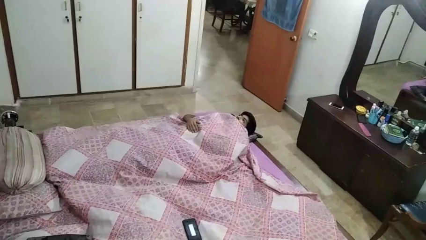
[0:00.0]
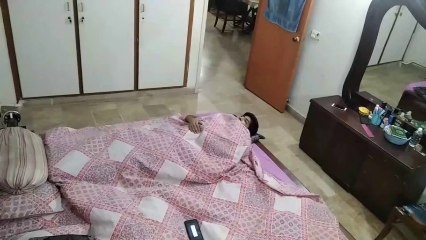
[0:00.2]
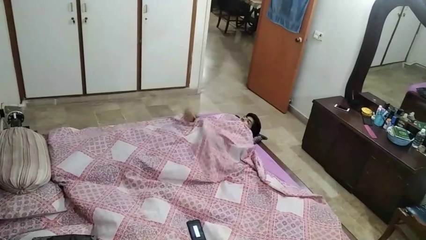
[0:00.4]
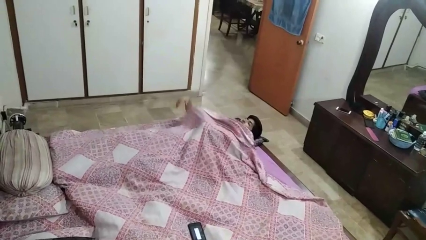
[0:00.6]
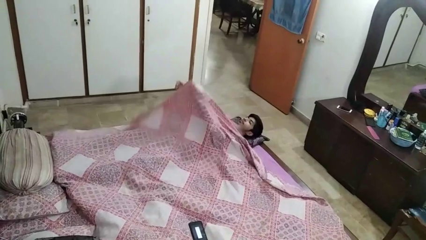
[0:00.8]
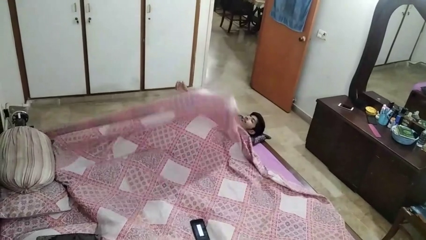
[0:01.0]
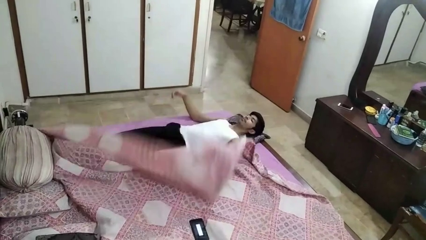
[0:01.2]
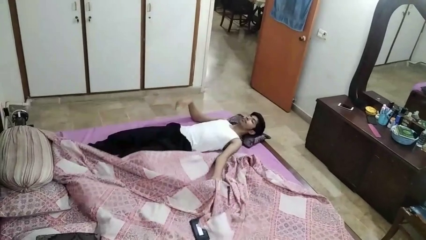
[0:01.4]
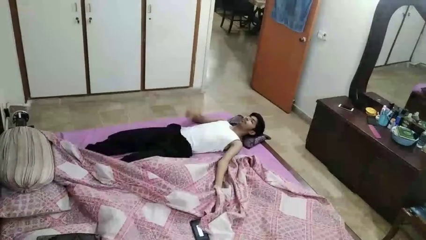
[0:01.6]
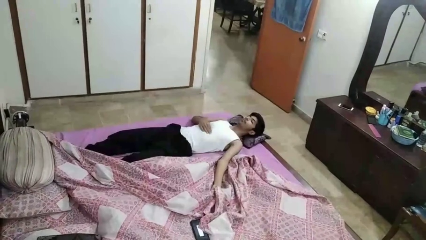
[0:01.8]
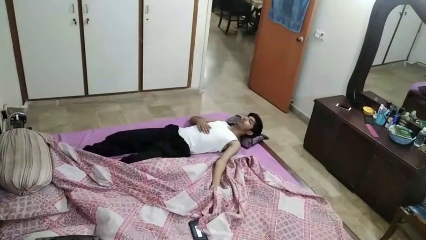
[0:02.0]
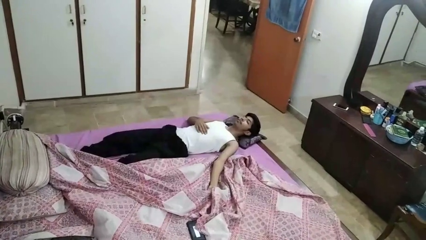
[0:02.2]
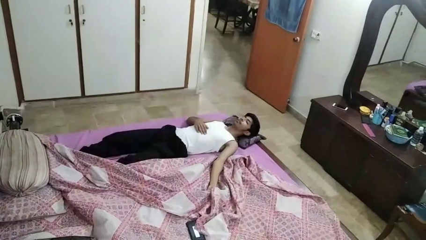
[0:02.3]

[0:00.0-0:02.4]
person uncovers with bedsheets

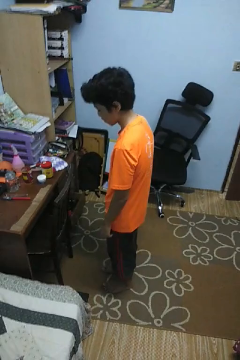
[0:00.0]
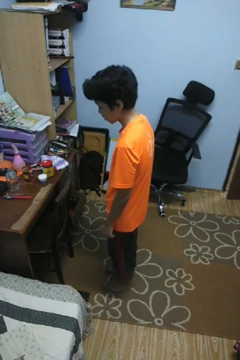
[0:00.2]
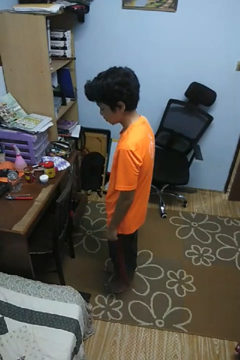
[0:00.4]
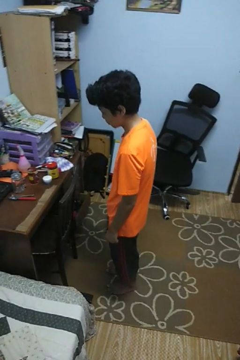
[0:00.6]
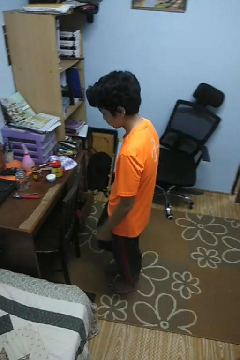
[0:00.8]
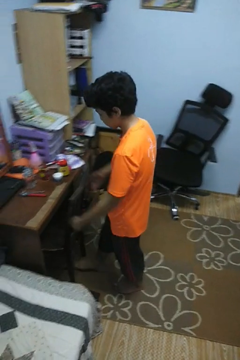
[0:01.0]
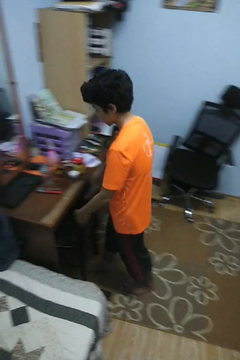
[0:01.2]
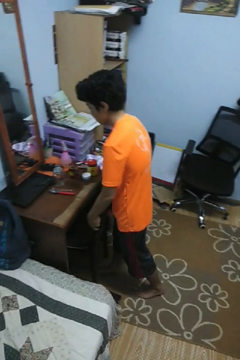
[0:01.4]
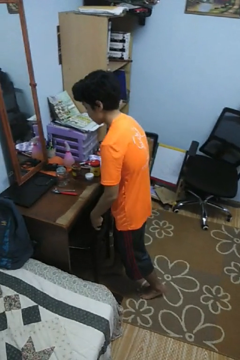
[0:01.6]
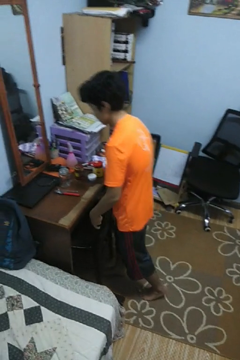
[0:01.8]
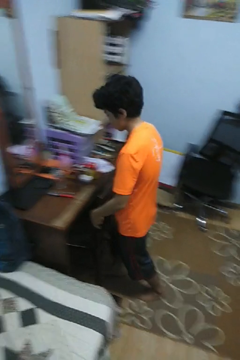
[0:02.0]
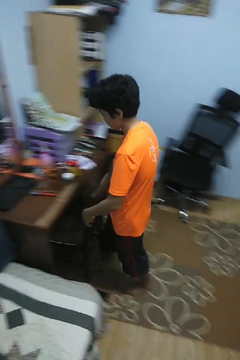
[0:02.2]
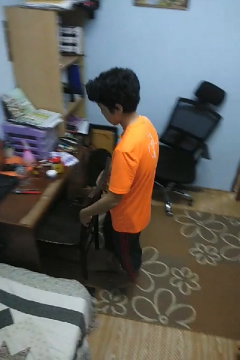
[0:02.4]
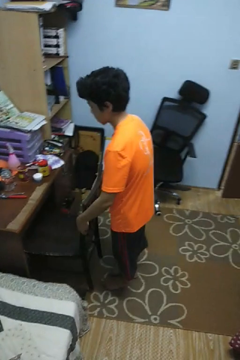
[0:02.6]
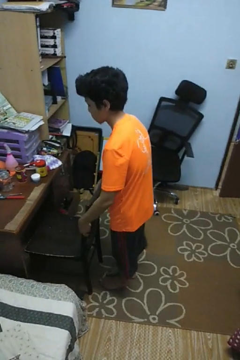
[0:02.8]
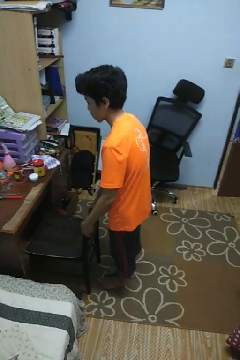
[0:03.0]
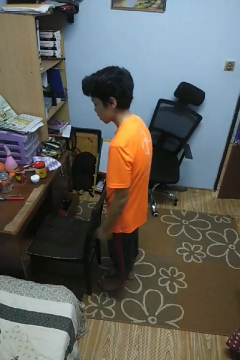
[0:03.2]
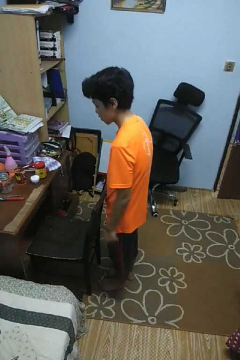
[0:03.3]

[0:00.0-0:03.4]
person pulls out chair

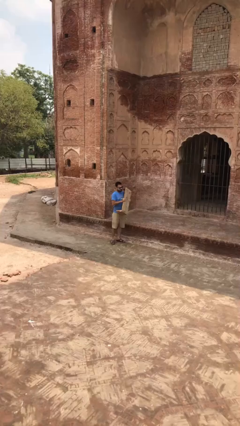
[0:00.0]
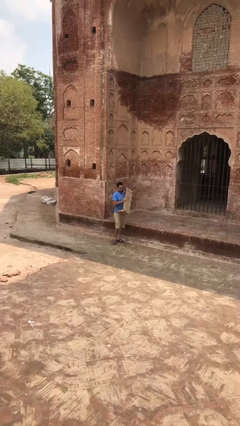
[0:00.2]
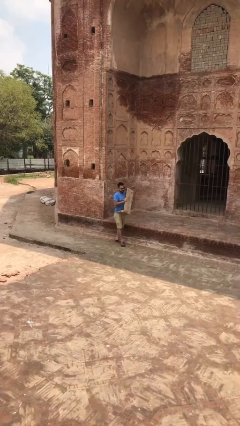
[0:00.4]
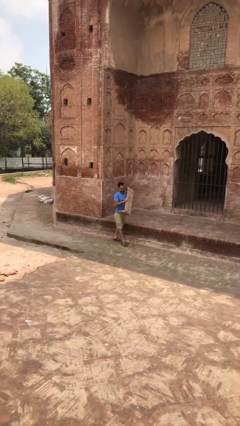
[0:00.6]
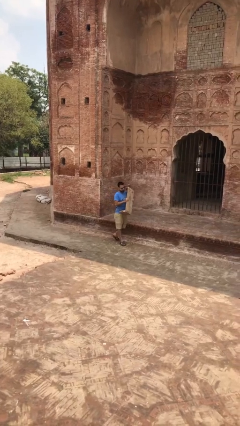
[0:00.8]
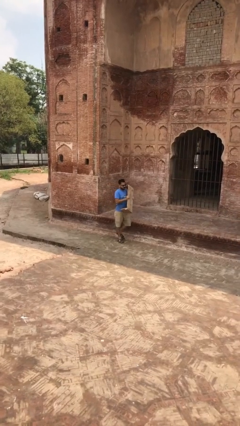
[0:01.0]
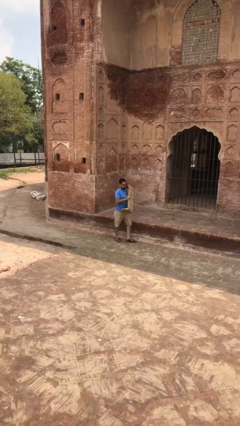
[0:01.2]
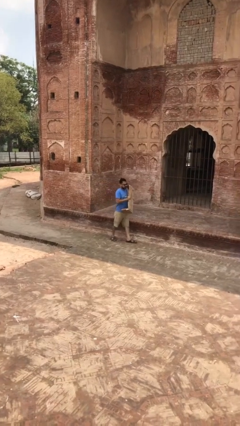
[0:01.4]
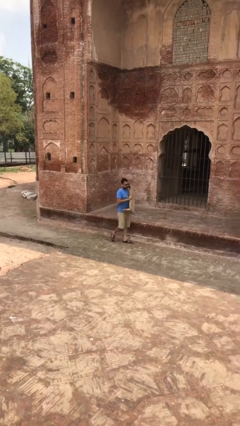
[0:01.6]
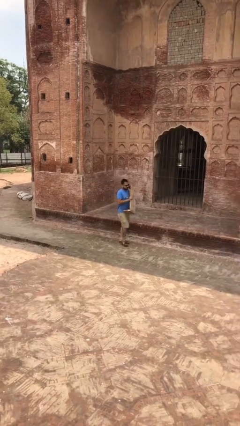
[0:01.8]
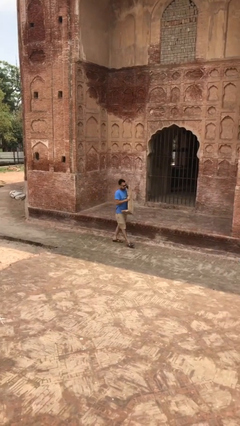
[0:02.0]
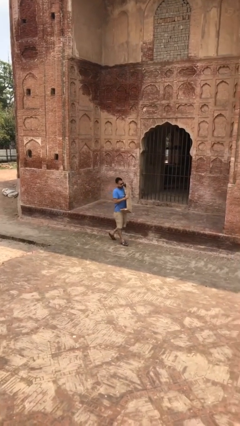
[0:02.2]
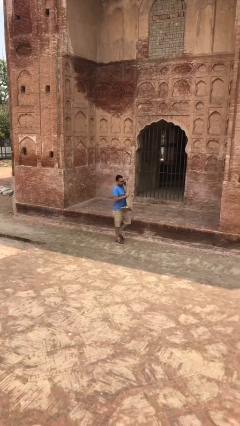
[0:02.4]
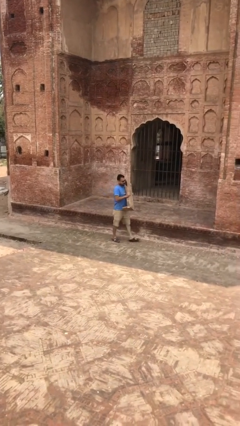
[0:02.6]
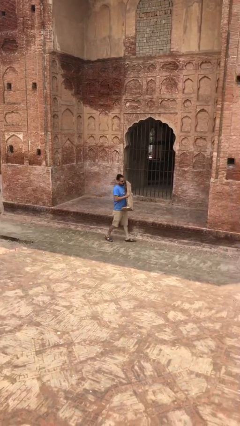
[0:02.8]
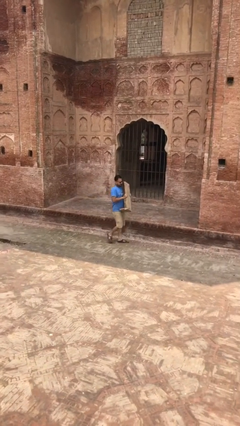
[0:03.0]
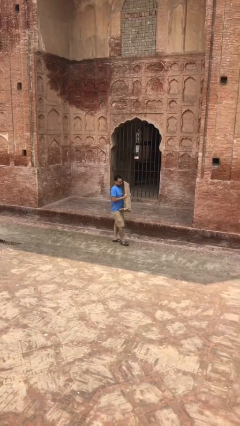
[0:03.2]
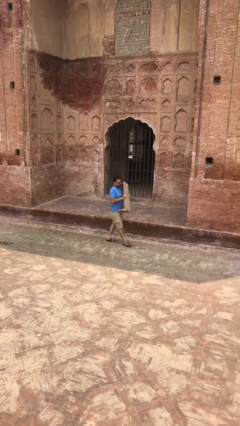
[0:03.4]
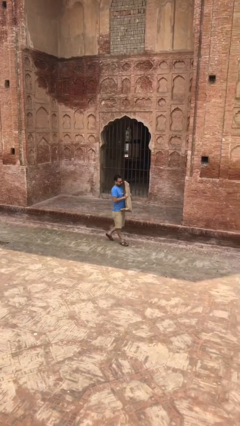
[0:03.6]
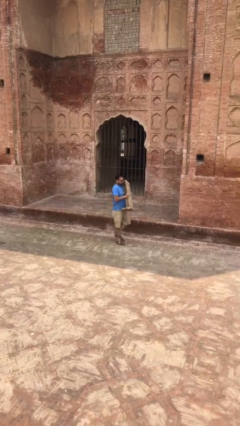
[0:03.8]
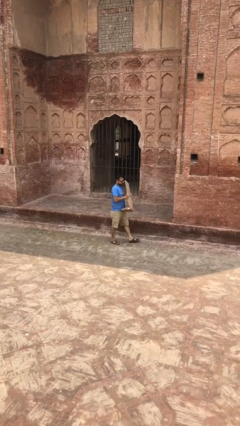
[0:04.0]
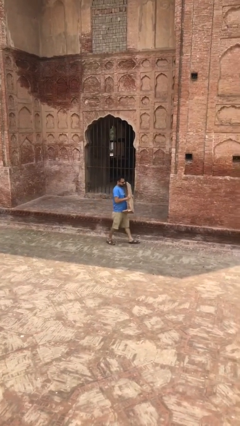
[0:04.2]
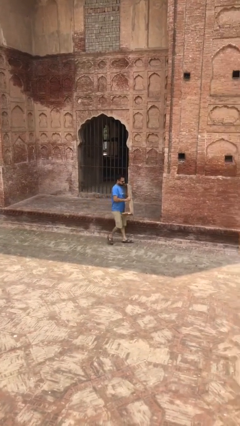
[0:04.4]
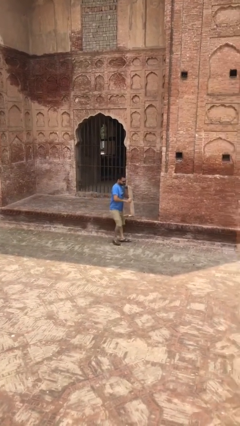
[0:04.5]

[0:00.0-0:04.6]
person carries heavy object

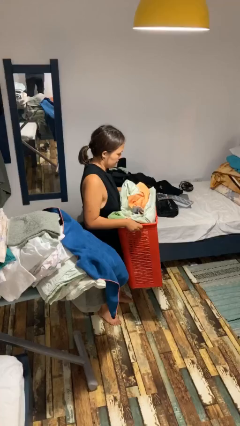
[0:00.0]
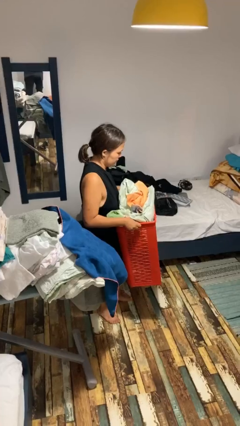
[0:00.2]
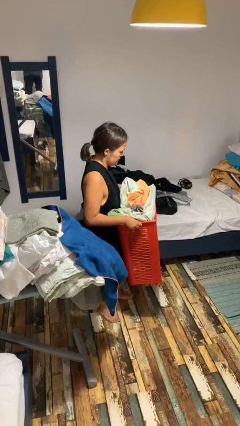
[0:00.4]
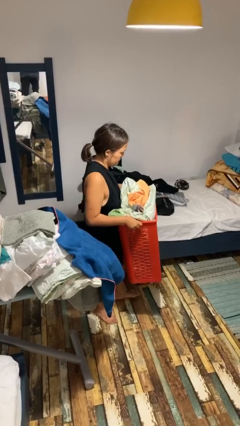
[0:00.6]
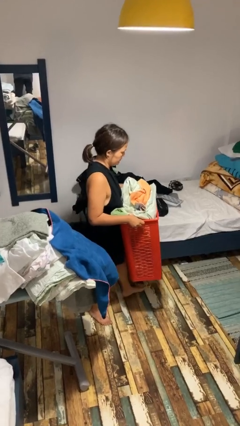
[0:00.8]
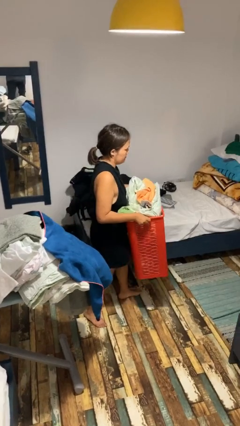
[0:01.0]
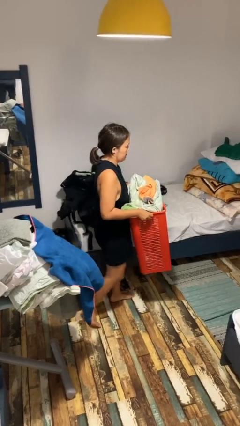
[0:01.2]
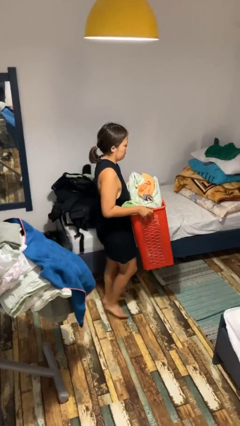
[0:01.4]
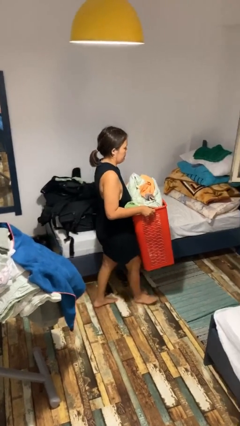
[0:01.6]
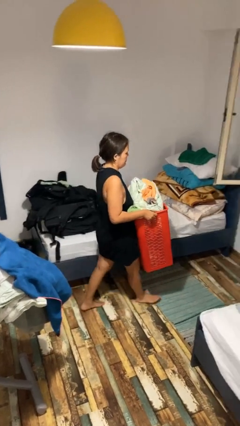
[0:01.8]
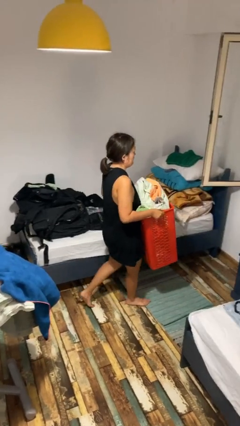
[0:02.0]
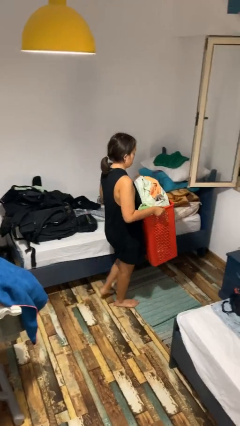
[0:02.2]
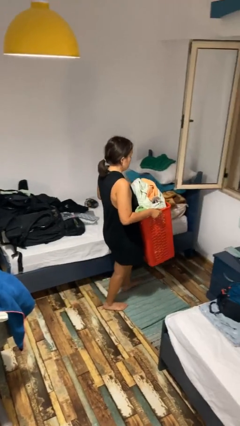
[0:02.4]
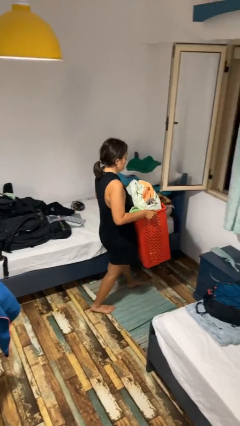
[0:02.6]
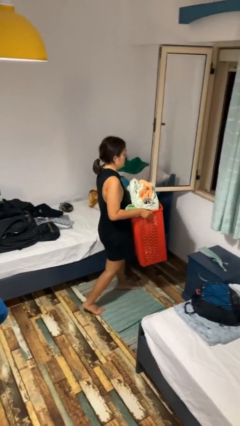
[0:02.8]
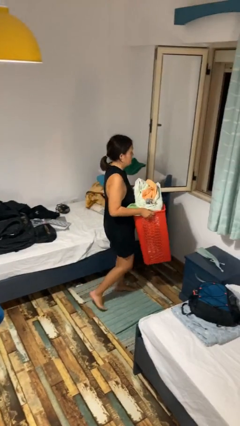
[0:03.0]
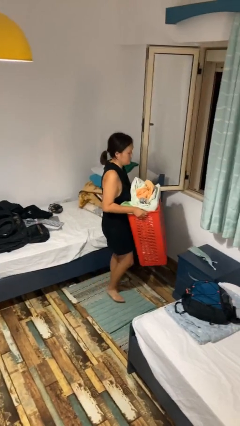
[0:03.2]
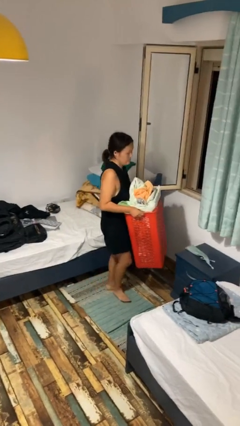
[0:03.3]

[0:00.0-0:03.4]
person carries laundry basket

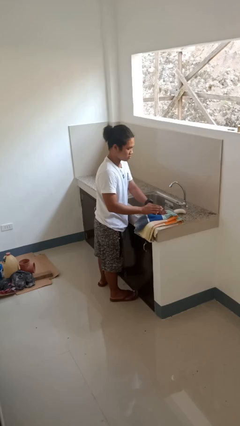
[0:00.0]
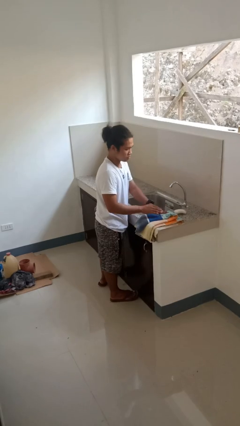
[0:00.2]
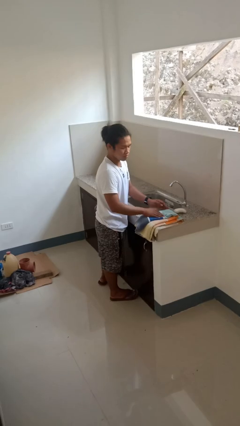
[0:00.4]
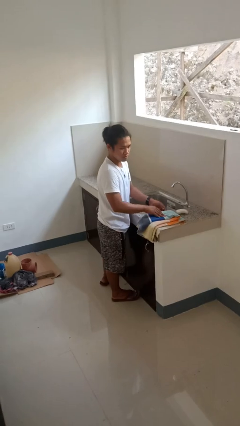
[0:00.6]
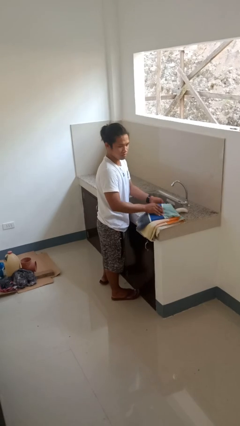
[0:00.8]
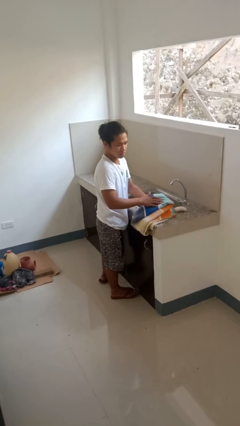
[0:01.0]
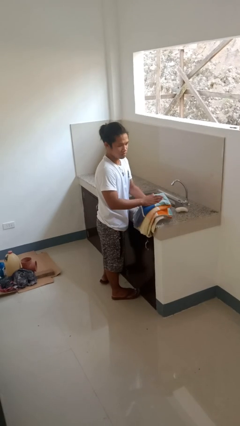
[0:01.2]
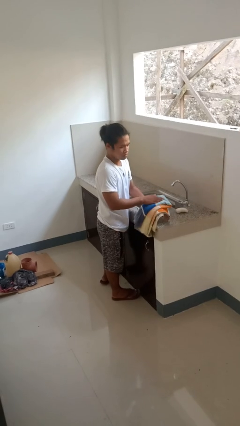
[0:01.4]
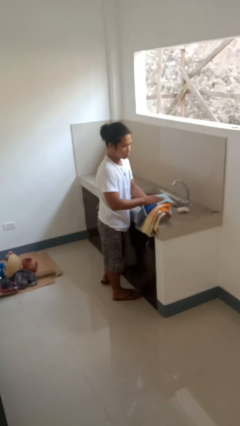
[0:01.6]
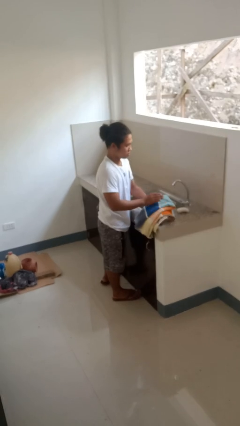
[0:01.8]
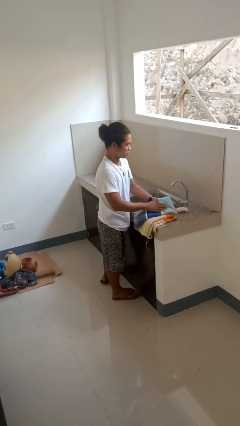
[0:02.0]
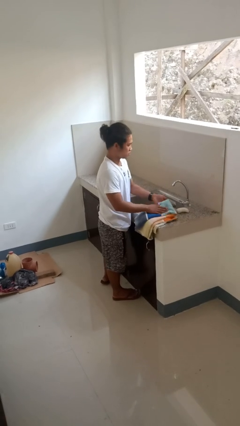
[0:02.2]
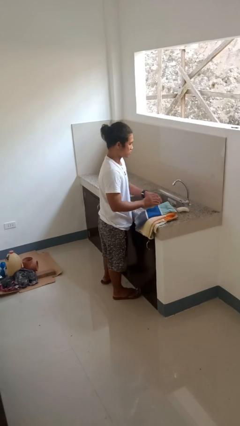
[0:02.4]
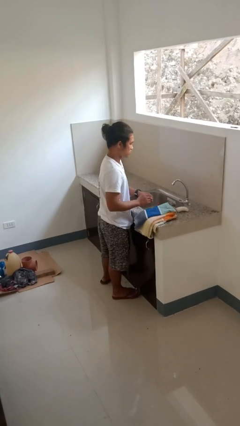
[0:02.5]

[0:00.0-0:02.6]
person dries hands with towel

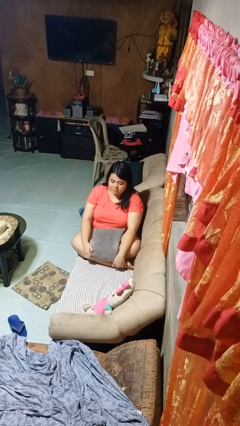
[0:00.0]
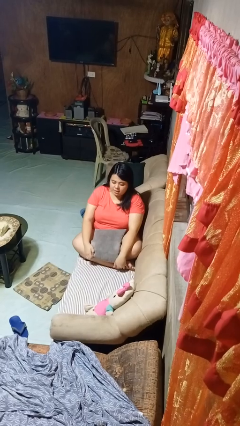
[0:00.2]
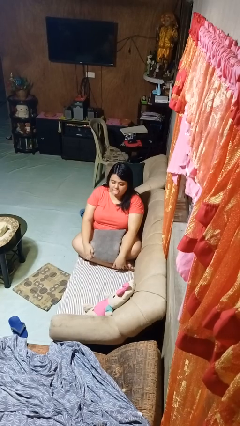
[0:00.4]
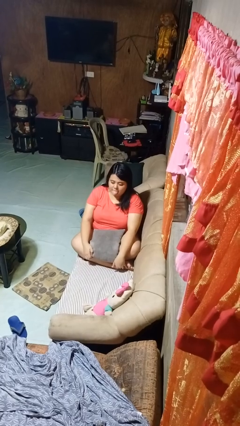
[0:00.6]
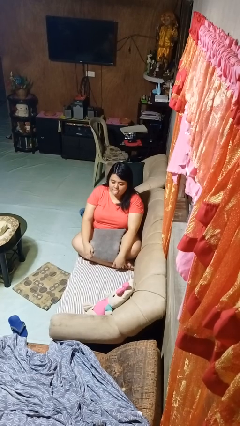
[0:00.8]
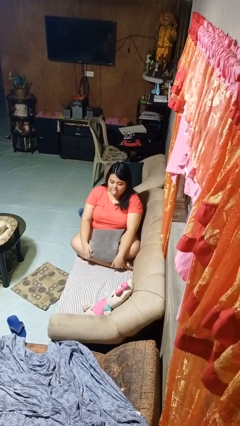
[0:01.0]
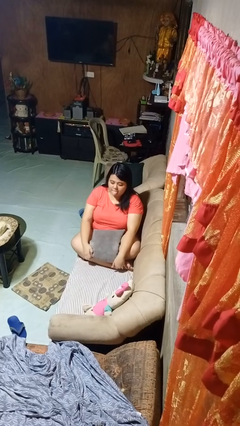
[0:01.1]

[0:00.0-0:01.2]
person sticks out tongue

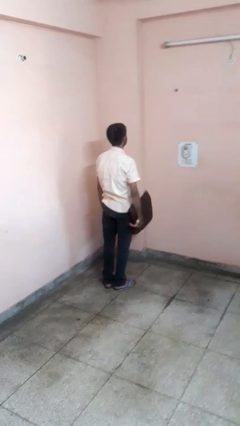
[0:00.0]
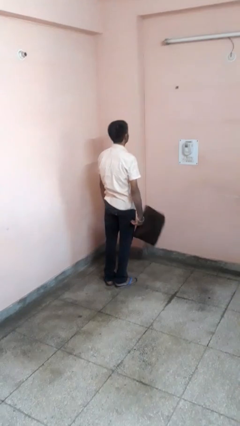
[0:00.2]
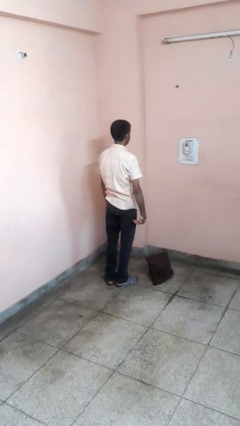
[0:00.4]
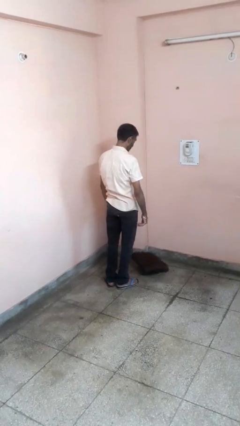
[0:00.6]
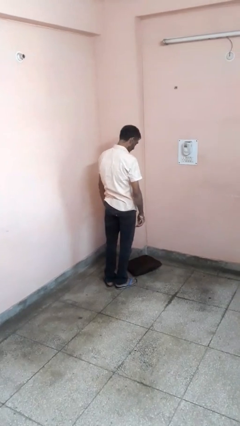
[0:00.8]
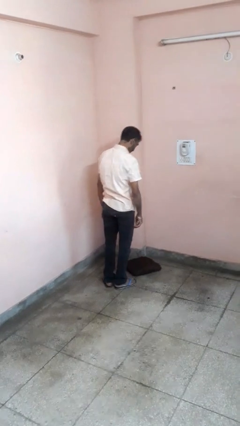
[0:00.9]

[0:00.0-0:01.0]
person throws object to ground
